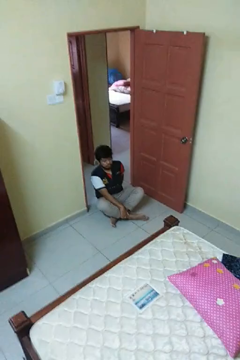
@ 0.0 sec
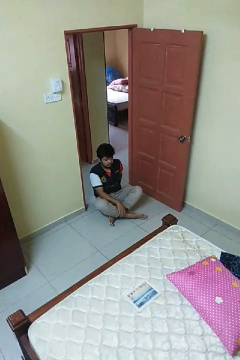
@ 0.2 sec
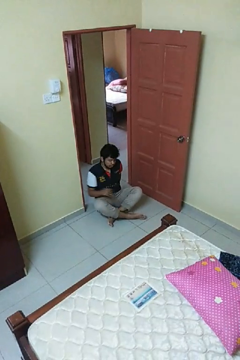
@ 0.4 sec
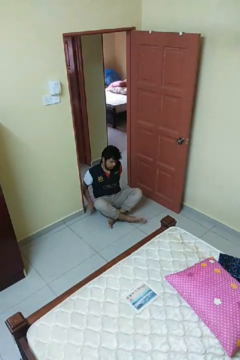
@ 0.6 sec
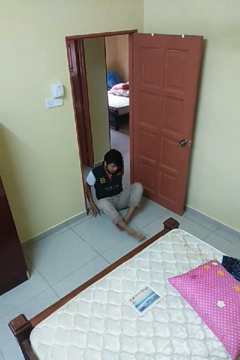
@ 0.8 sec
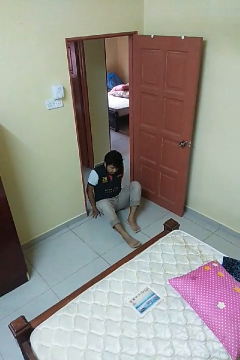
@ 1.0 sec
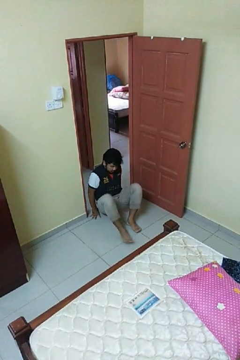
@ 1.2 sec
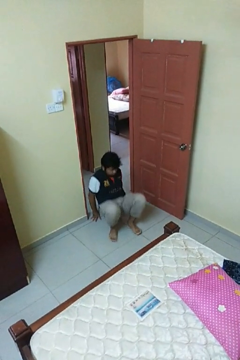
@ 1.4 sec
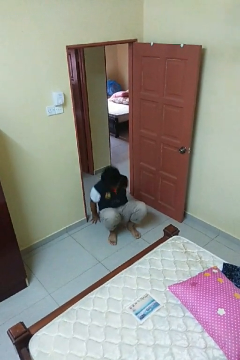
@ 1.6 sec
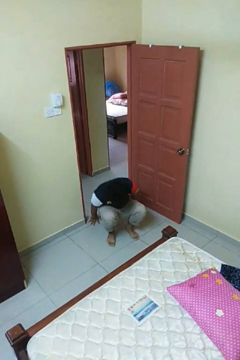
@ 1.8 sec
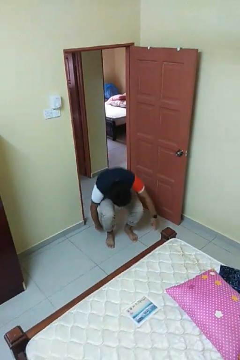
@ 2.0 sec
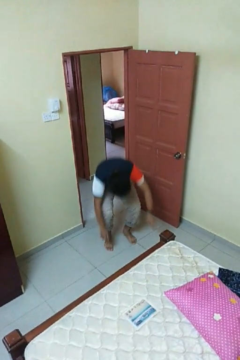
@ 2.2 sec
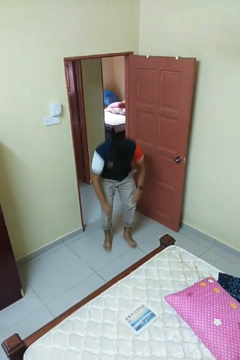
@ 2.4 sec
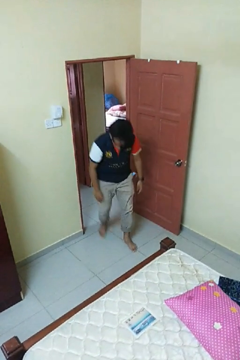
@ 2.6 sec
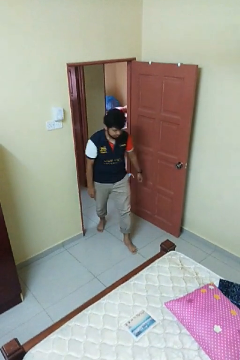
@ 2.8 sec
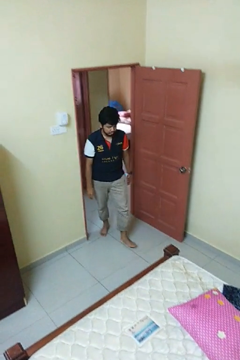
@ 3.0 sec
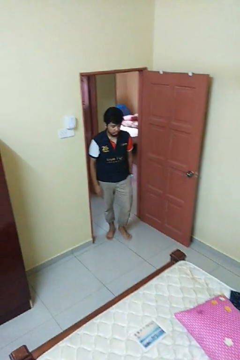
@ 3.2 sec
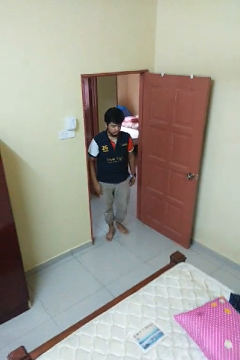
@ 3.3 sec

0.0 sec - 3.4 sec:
person stands up from floor

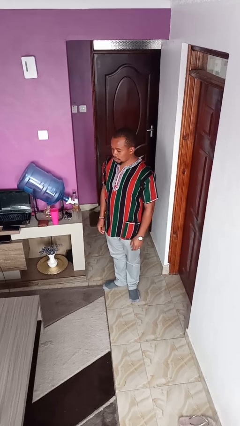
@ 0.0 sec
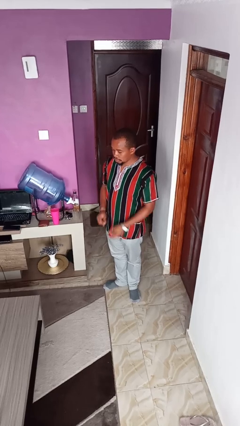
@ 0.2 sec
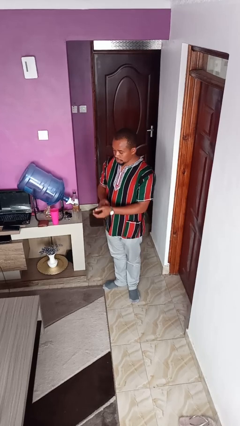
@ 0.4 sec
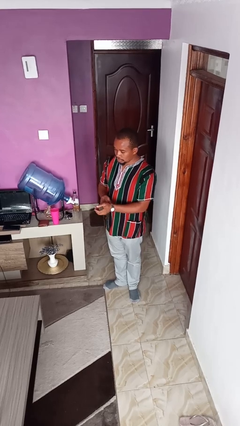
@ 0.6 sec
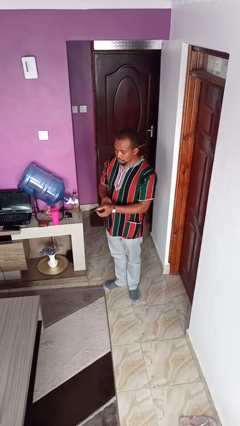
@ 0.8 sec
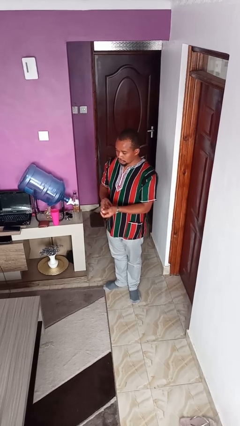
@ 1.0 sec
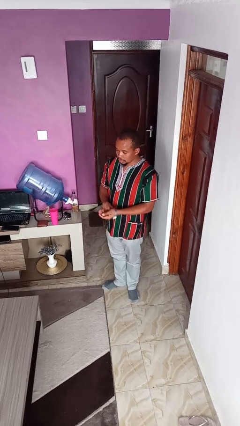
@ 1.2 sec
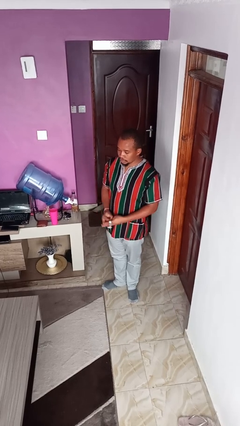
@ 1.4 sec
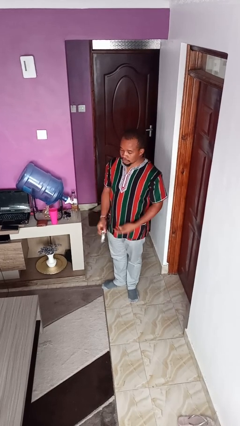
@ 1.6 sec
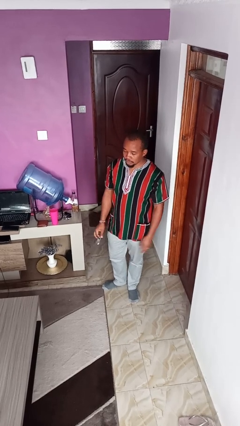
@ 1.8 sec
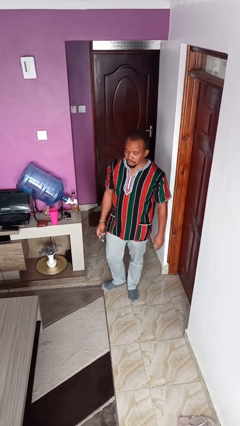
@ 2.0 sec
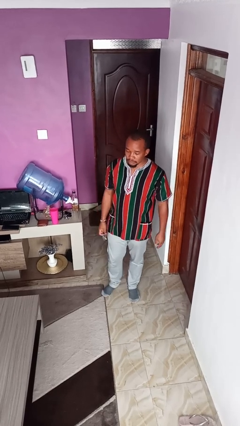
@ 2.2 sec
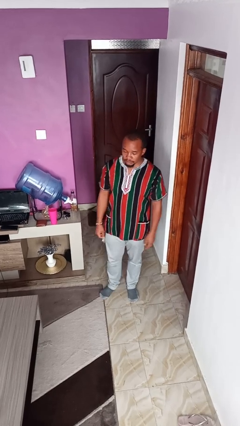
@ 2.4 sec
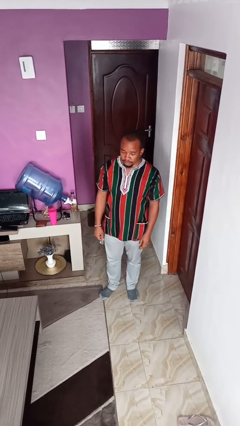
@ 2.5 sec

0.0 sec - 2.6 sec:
person takes off wristwatch

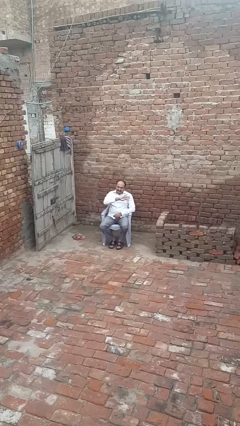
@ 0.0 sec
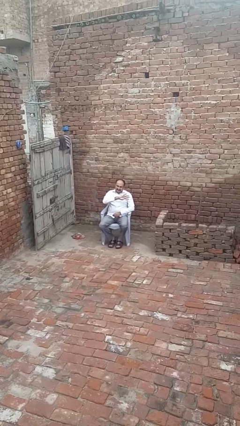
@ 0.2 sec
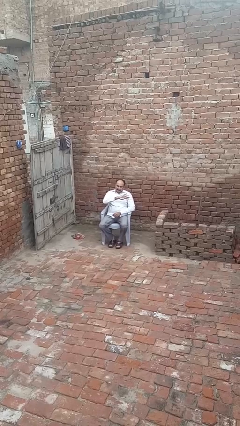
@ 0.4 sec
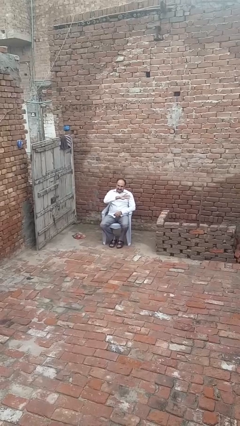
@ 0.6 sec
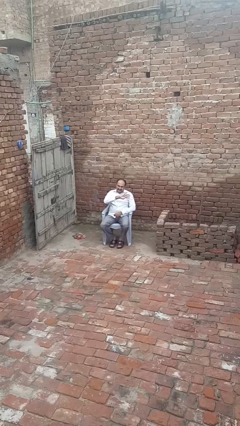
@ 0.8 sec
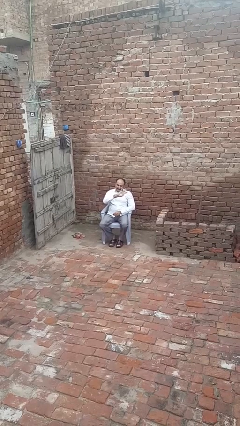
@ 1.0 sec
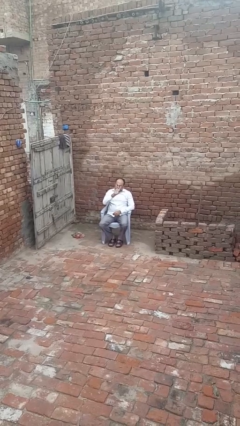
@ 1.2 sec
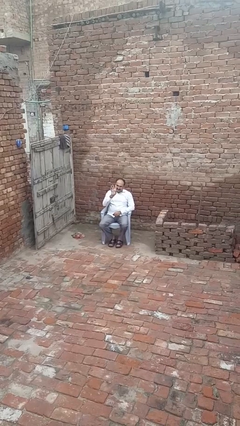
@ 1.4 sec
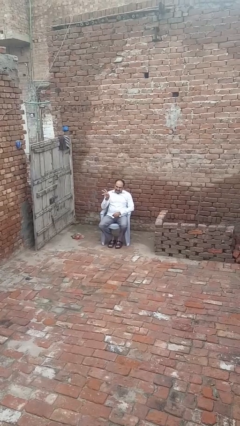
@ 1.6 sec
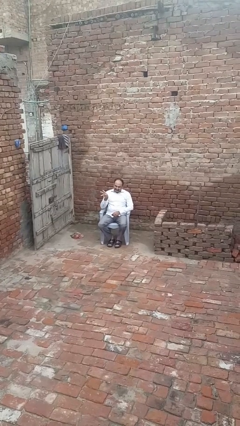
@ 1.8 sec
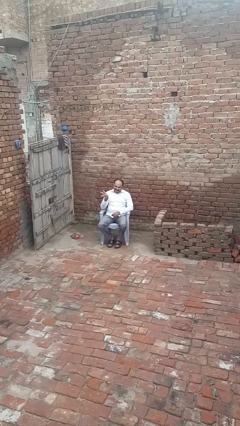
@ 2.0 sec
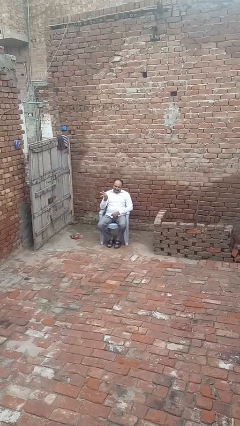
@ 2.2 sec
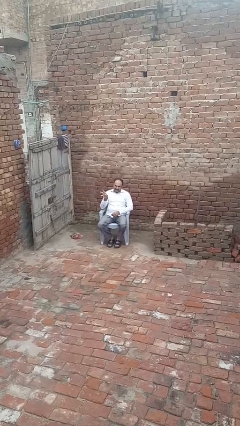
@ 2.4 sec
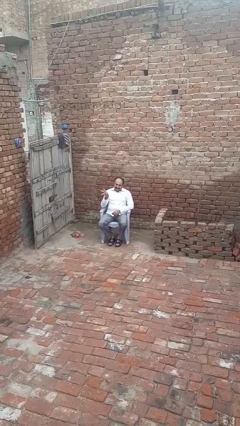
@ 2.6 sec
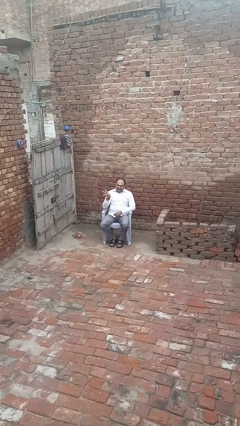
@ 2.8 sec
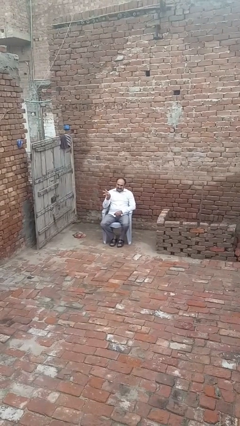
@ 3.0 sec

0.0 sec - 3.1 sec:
person gestures swipe right

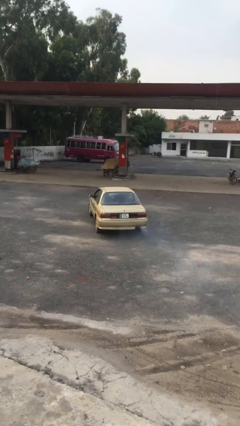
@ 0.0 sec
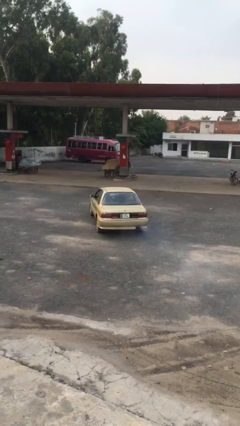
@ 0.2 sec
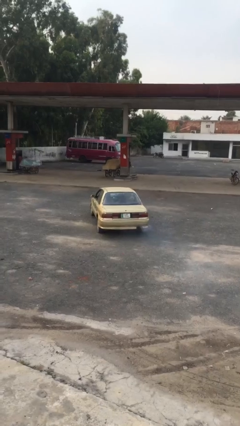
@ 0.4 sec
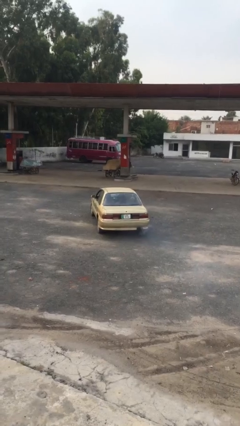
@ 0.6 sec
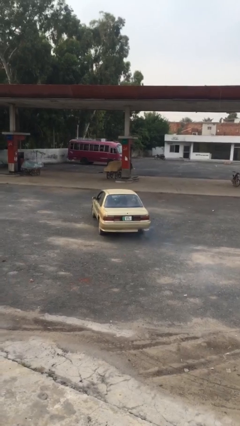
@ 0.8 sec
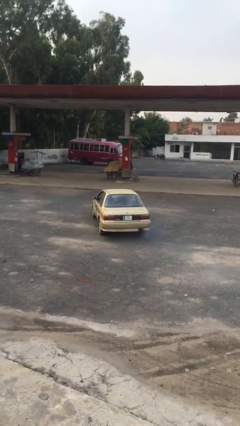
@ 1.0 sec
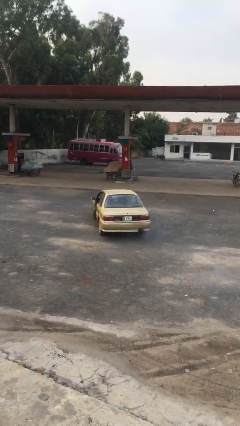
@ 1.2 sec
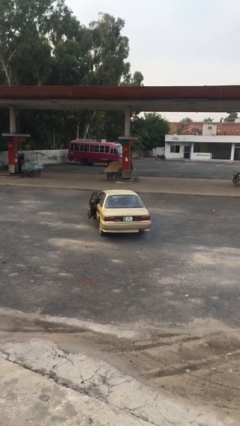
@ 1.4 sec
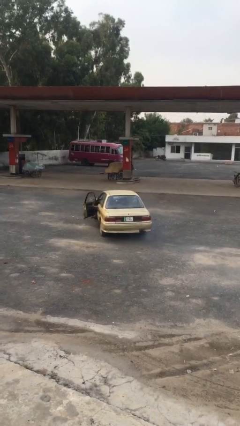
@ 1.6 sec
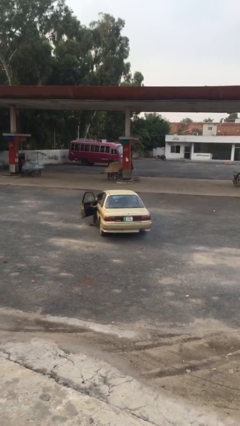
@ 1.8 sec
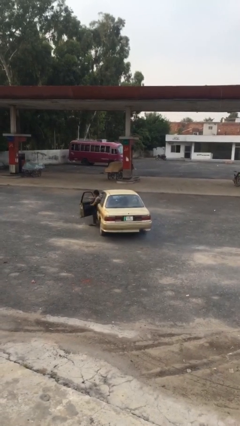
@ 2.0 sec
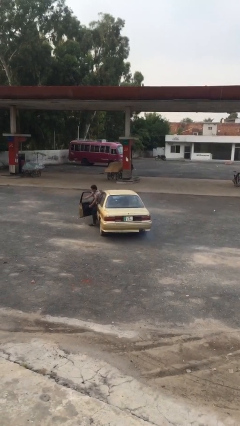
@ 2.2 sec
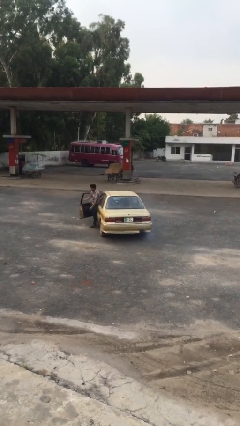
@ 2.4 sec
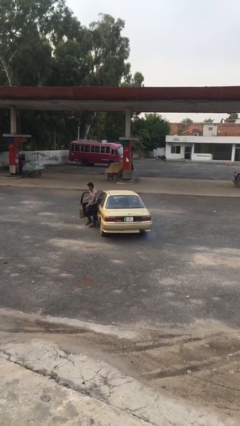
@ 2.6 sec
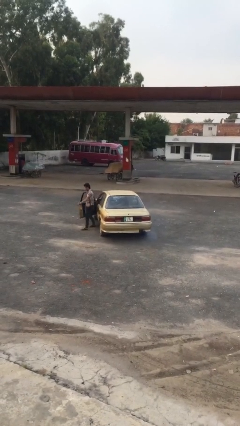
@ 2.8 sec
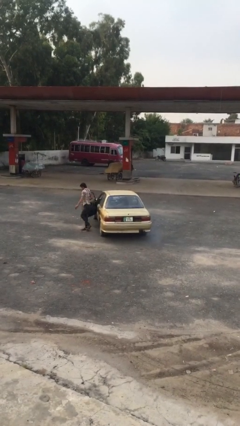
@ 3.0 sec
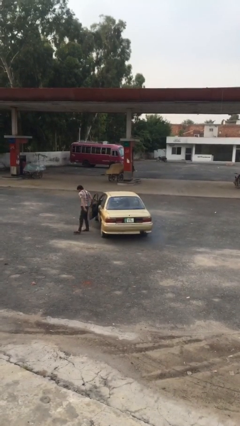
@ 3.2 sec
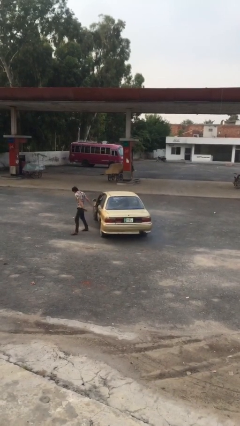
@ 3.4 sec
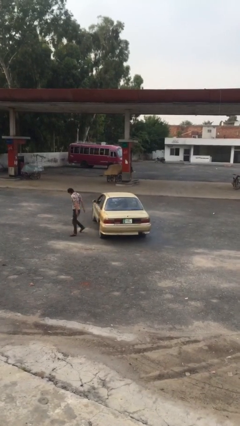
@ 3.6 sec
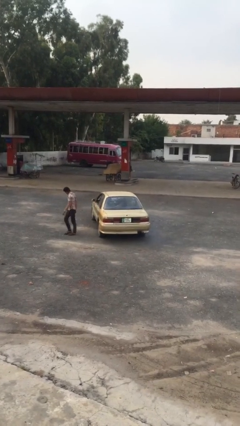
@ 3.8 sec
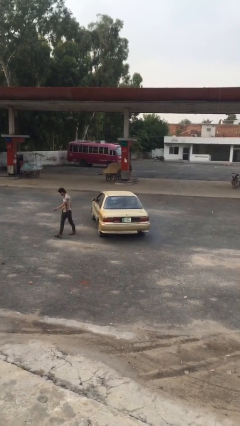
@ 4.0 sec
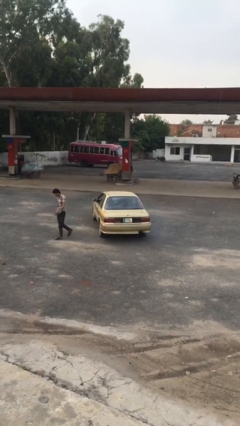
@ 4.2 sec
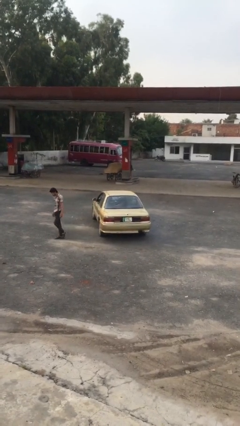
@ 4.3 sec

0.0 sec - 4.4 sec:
car drops off person

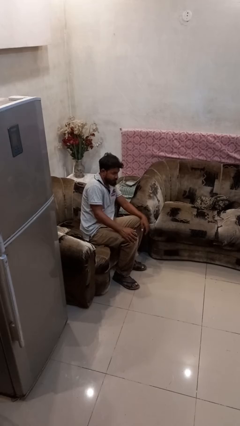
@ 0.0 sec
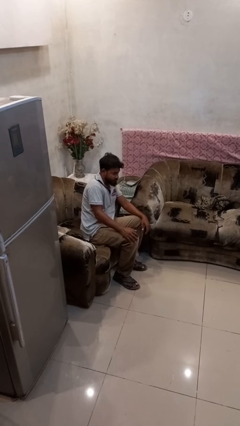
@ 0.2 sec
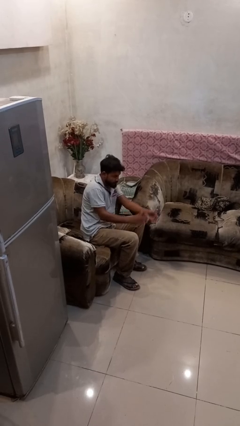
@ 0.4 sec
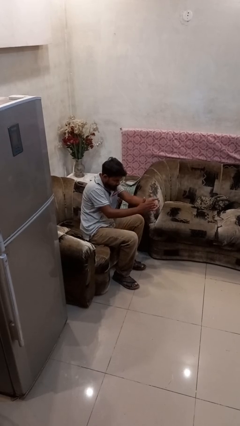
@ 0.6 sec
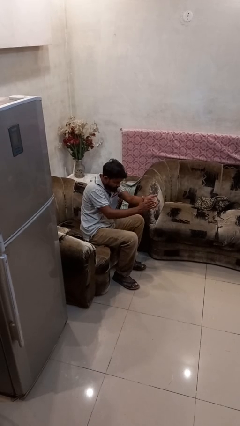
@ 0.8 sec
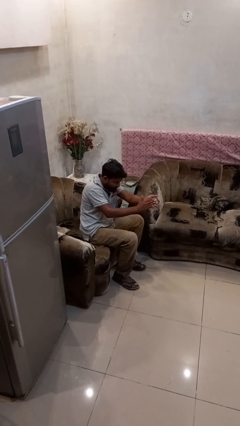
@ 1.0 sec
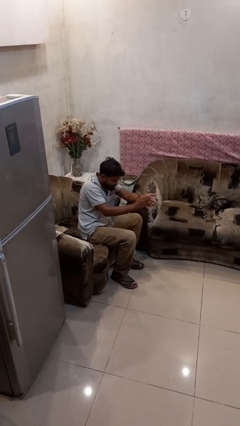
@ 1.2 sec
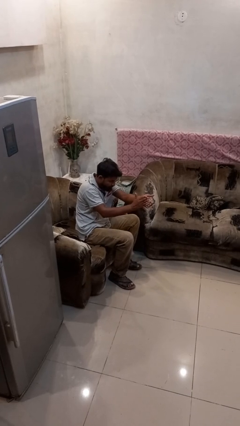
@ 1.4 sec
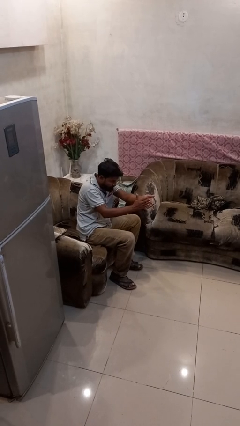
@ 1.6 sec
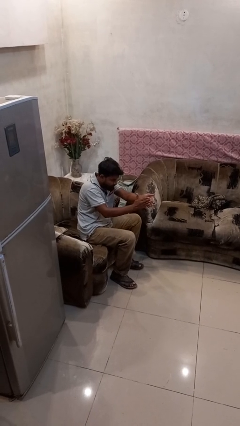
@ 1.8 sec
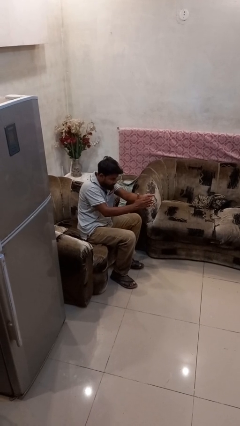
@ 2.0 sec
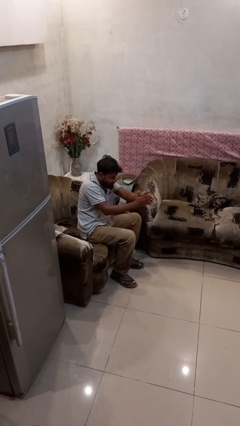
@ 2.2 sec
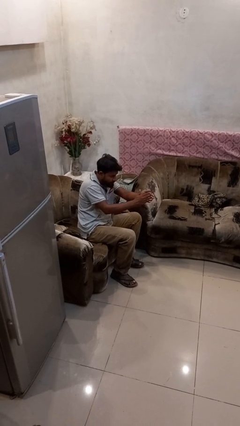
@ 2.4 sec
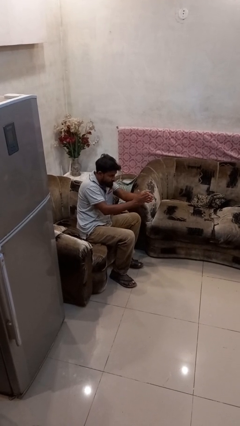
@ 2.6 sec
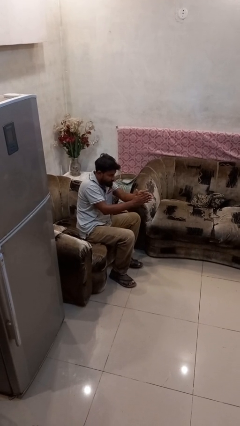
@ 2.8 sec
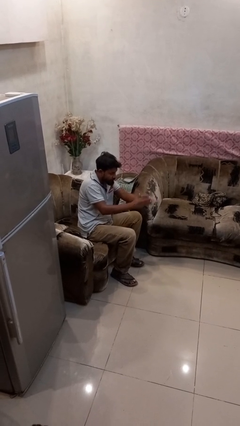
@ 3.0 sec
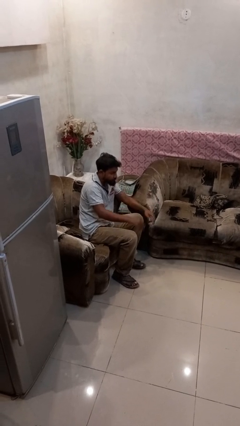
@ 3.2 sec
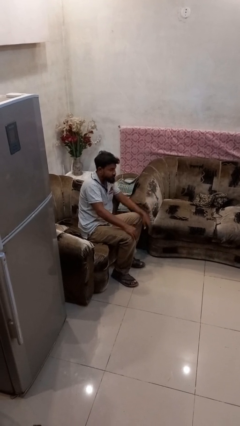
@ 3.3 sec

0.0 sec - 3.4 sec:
person claps hands

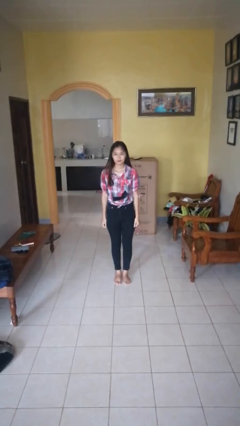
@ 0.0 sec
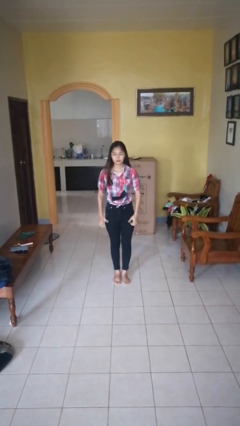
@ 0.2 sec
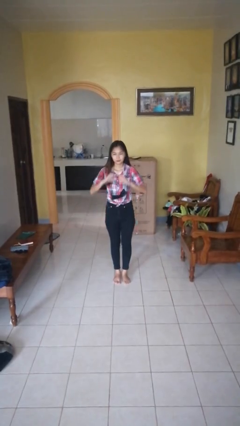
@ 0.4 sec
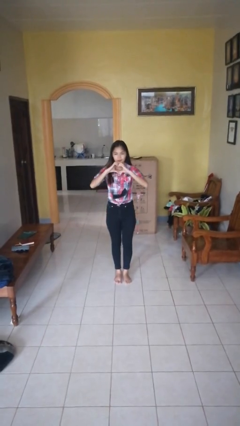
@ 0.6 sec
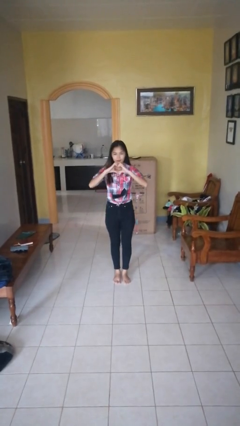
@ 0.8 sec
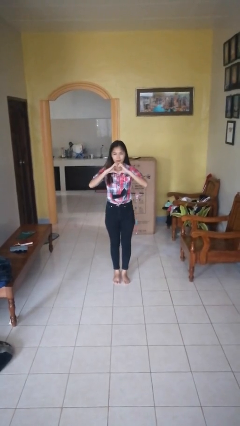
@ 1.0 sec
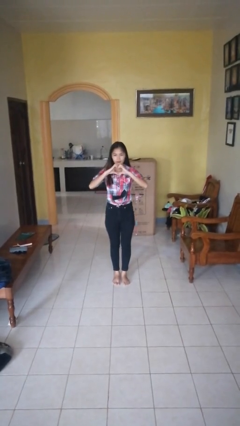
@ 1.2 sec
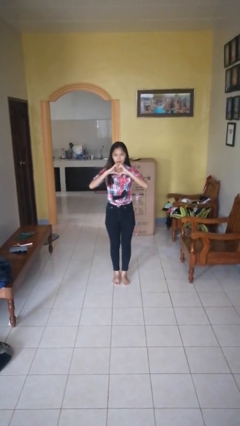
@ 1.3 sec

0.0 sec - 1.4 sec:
person gestures heart
